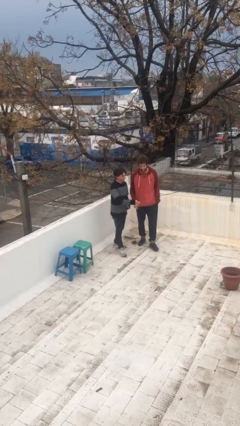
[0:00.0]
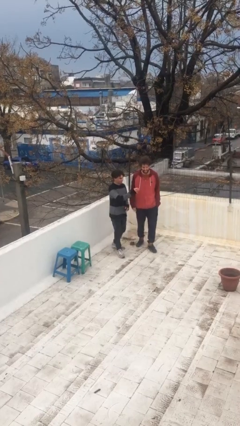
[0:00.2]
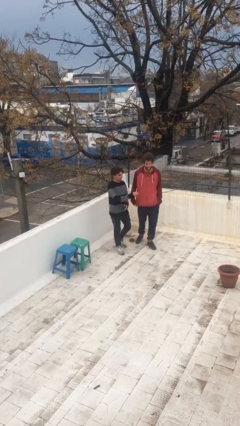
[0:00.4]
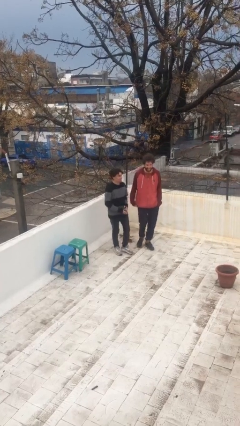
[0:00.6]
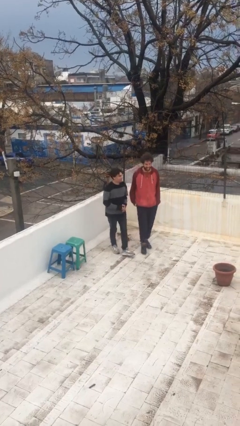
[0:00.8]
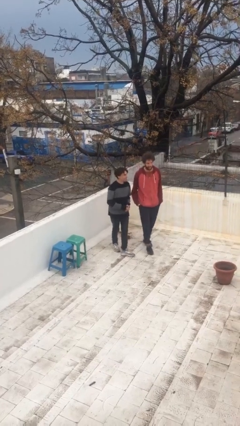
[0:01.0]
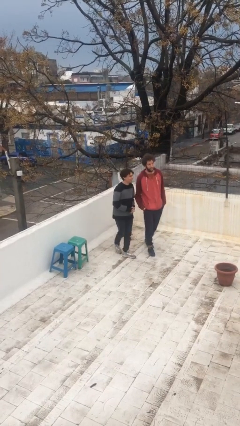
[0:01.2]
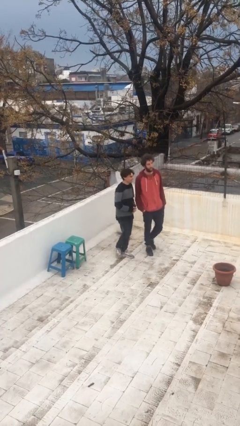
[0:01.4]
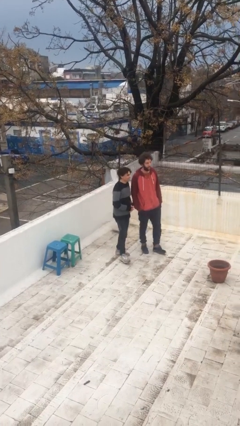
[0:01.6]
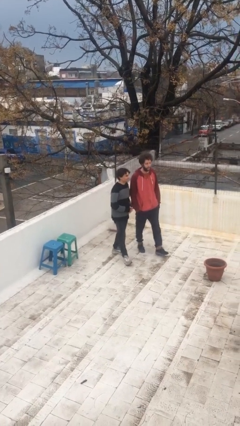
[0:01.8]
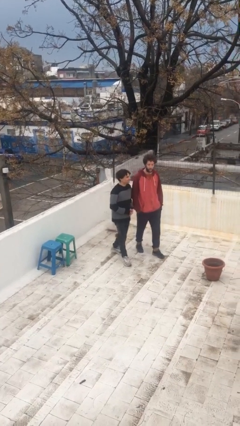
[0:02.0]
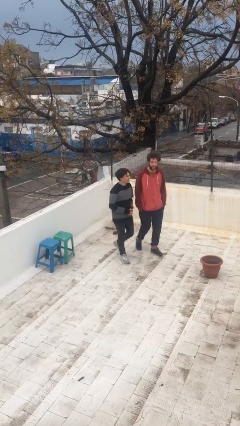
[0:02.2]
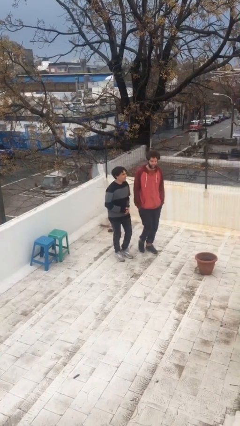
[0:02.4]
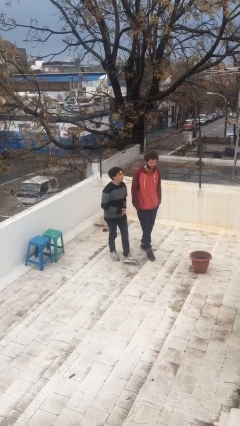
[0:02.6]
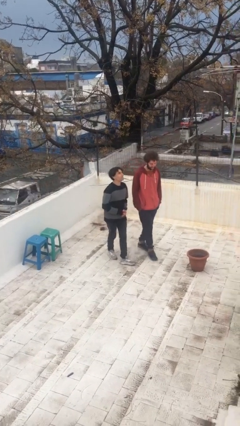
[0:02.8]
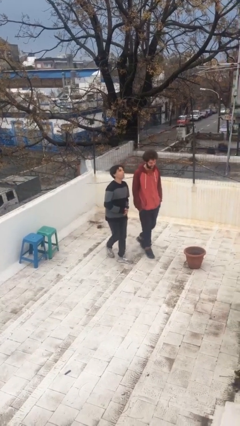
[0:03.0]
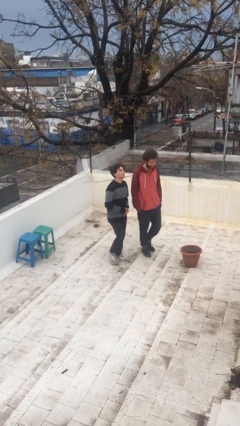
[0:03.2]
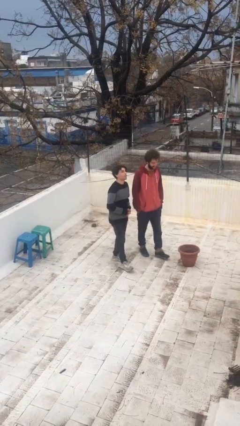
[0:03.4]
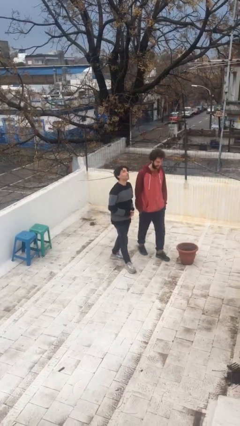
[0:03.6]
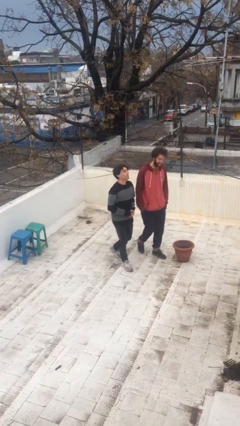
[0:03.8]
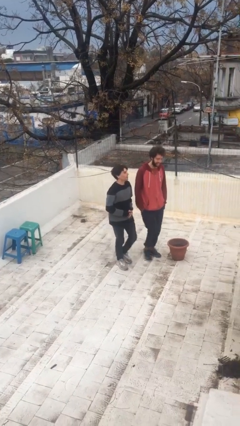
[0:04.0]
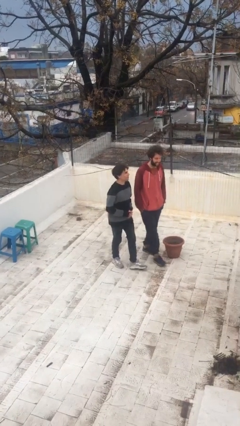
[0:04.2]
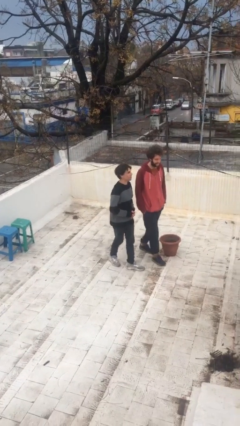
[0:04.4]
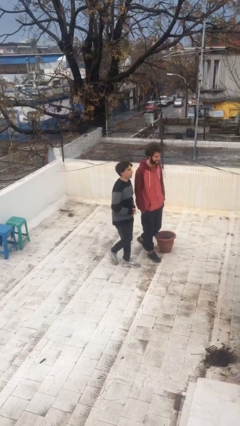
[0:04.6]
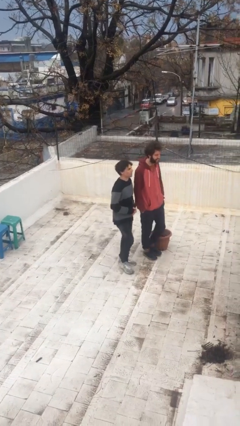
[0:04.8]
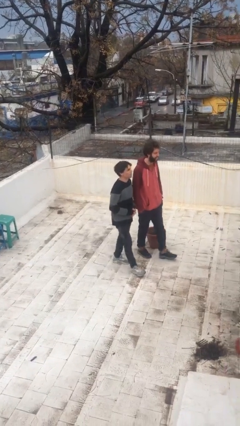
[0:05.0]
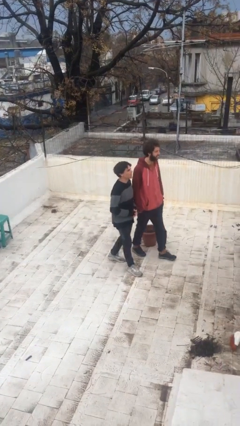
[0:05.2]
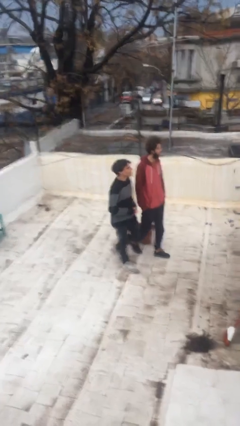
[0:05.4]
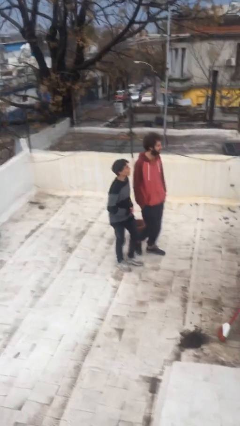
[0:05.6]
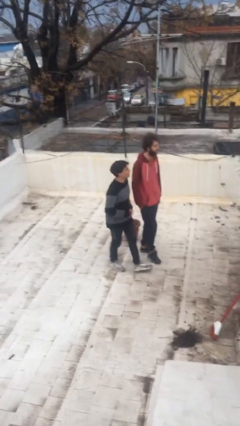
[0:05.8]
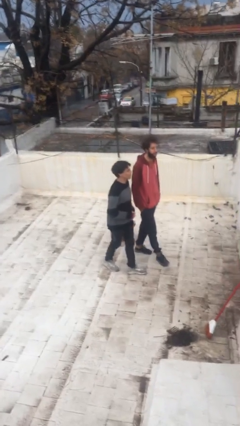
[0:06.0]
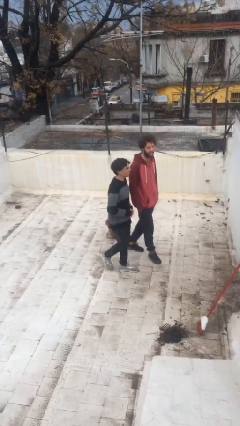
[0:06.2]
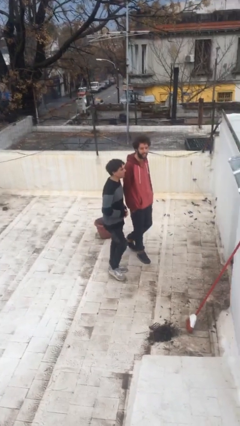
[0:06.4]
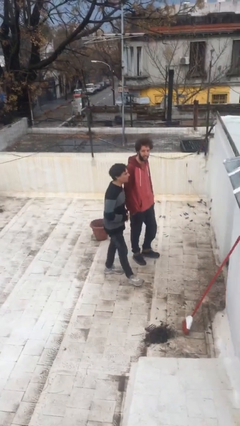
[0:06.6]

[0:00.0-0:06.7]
person talks to person

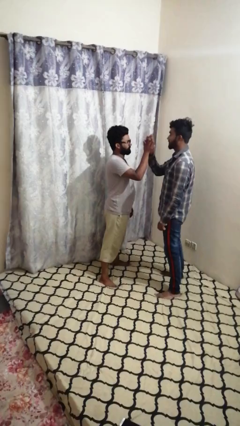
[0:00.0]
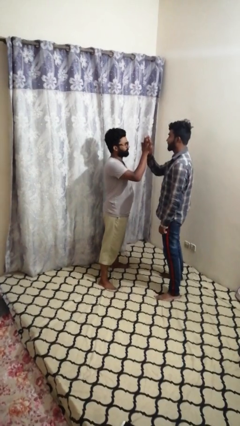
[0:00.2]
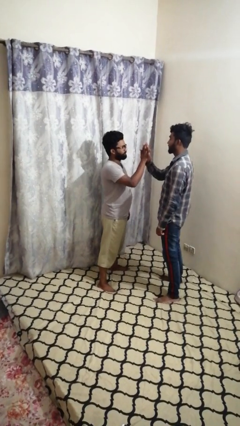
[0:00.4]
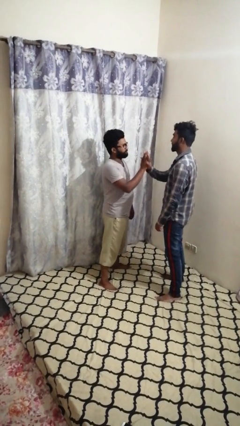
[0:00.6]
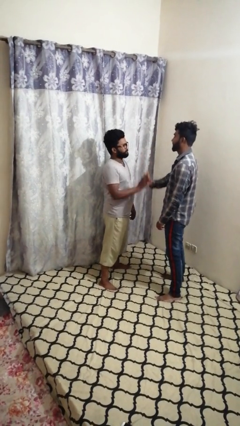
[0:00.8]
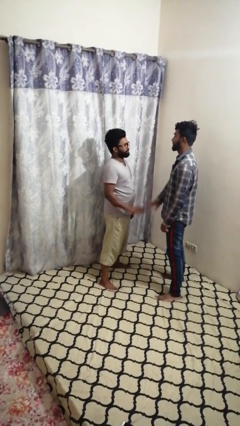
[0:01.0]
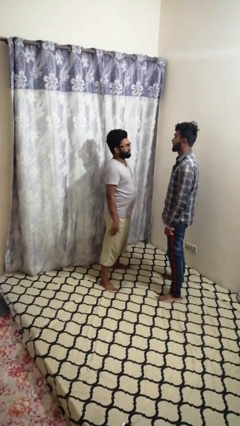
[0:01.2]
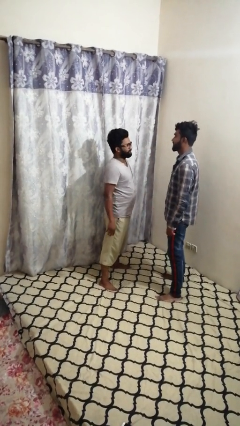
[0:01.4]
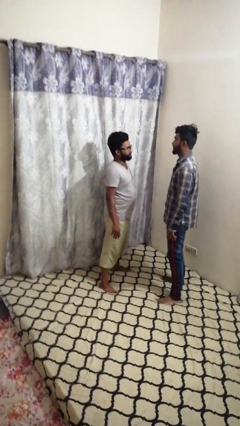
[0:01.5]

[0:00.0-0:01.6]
person highfives hand

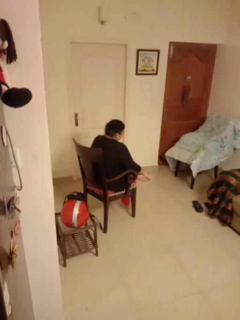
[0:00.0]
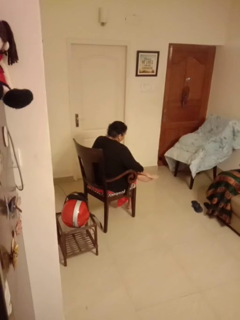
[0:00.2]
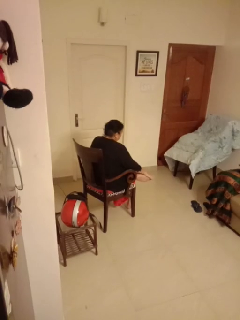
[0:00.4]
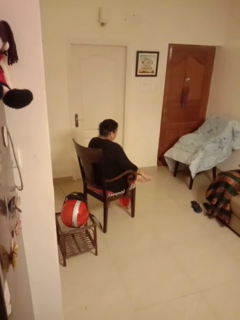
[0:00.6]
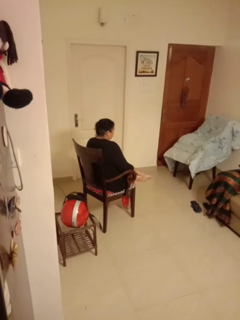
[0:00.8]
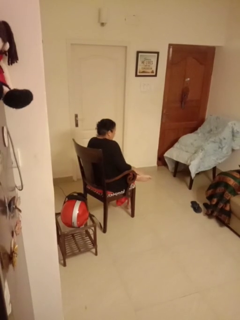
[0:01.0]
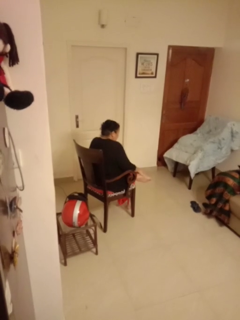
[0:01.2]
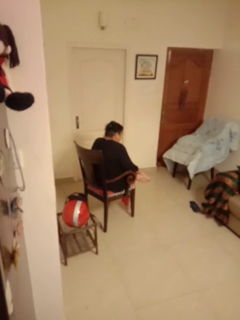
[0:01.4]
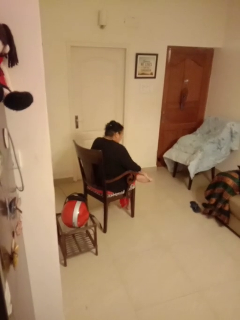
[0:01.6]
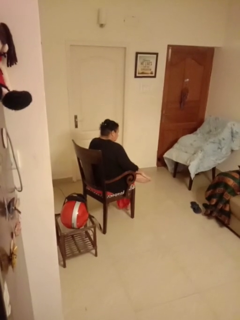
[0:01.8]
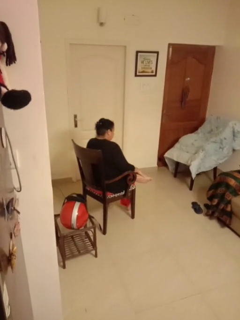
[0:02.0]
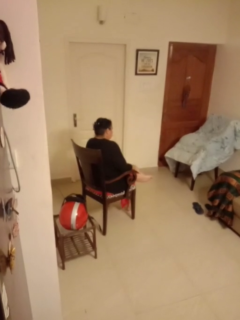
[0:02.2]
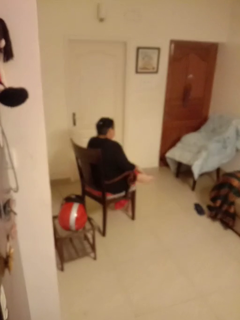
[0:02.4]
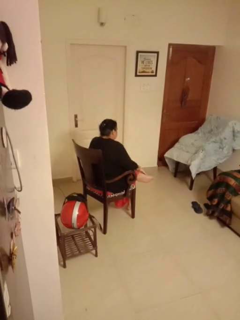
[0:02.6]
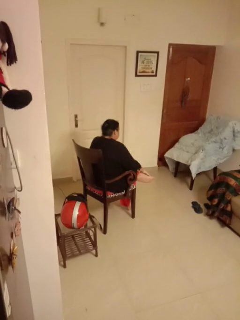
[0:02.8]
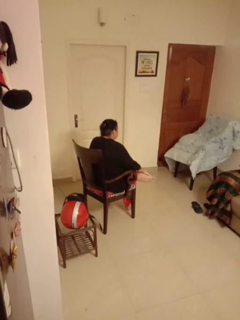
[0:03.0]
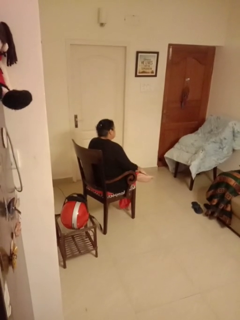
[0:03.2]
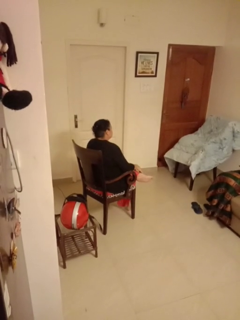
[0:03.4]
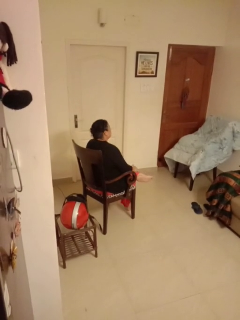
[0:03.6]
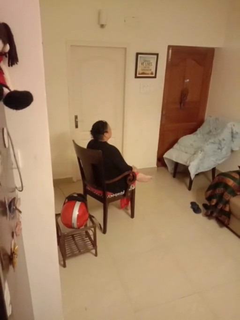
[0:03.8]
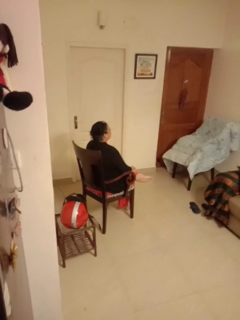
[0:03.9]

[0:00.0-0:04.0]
person rubs foot

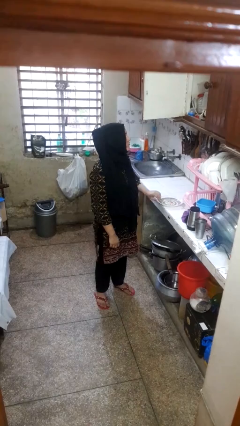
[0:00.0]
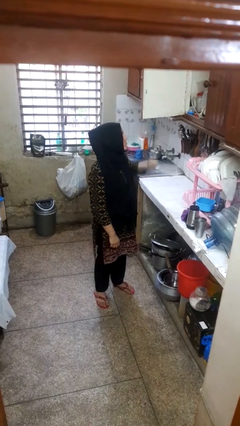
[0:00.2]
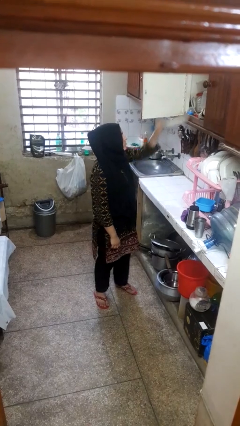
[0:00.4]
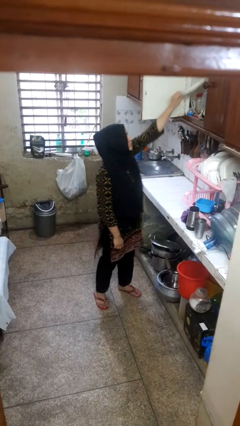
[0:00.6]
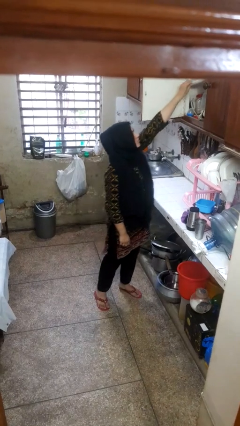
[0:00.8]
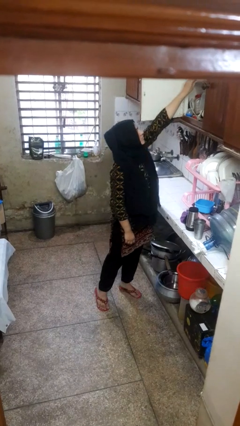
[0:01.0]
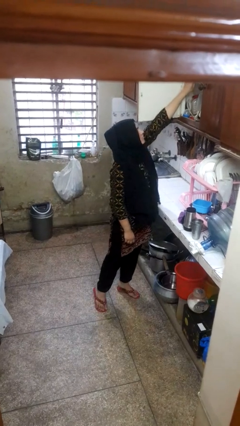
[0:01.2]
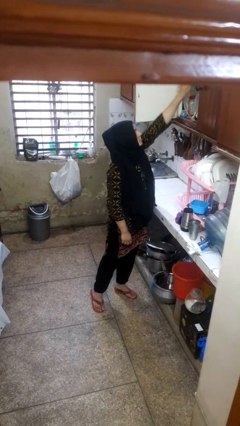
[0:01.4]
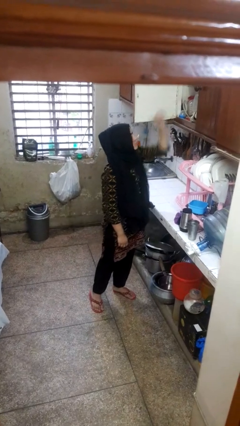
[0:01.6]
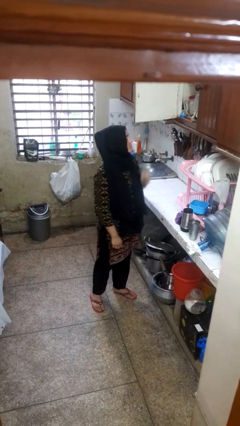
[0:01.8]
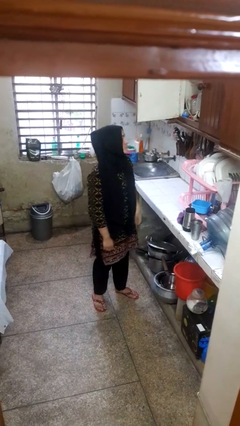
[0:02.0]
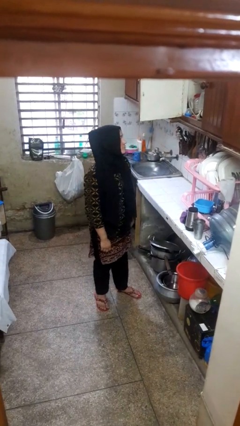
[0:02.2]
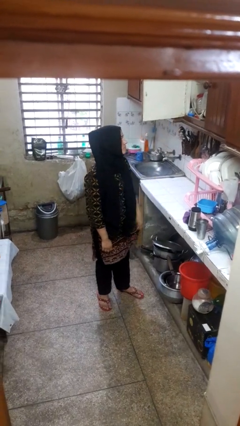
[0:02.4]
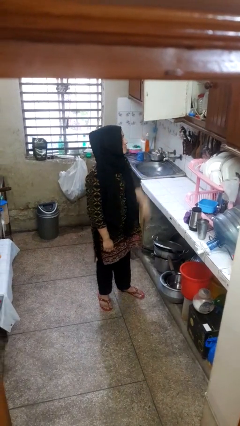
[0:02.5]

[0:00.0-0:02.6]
person puts object in cabinet

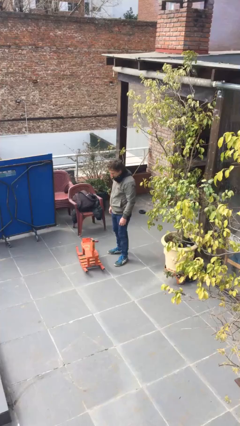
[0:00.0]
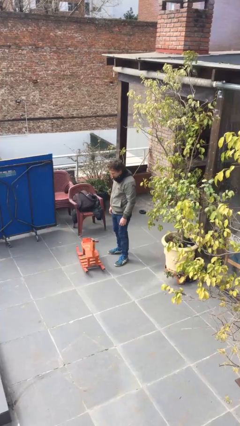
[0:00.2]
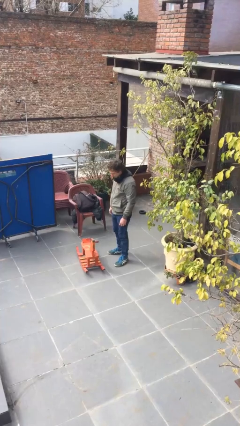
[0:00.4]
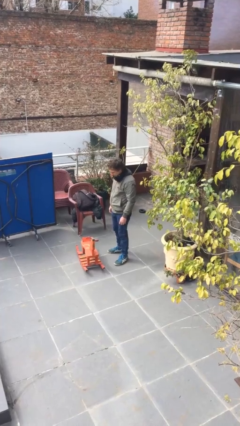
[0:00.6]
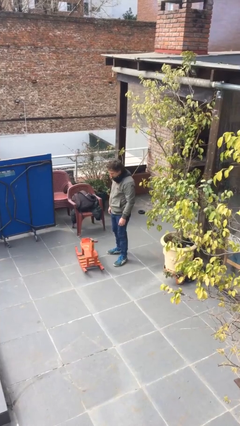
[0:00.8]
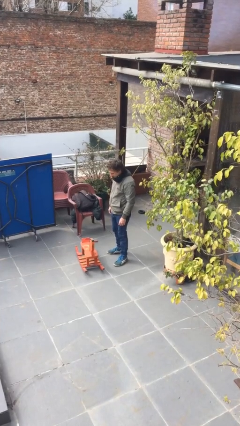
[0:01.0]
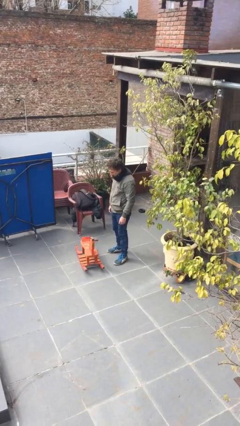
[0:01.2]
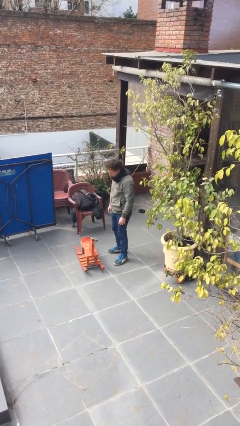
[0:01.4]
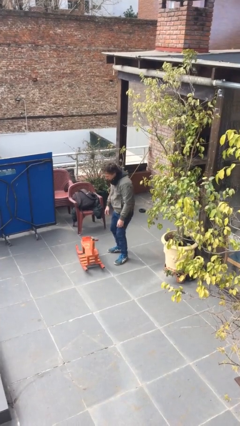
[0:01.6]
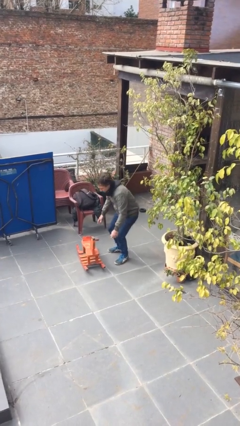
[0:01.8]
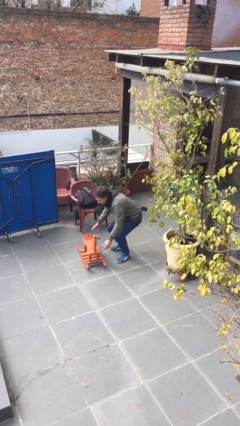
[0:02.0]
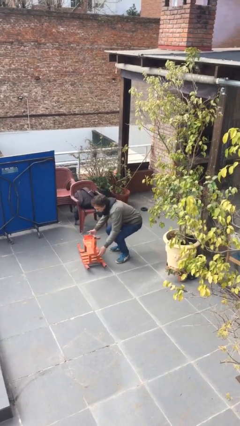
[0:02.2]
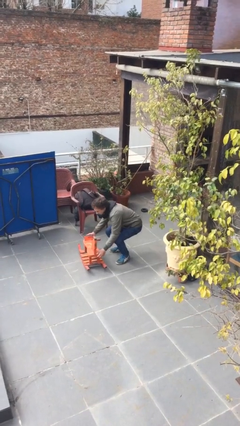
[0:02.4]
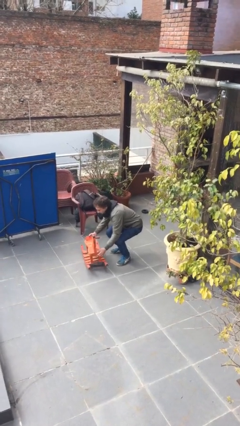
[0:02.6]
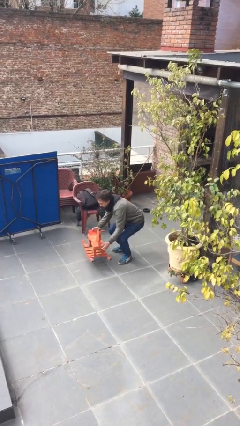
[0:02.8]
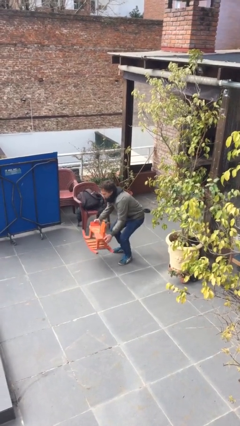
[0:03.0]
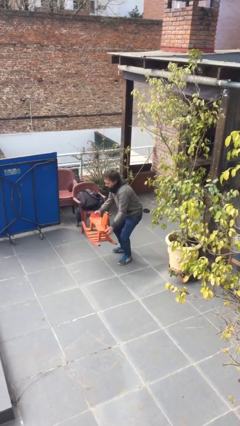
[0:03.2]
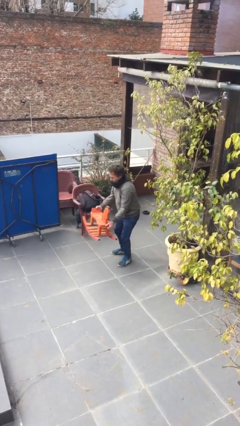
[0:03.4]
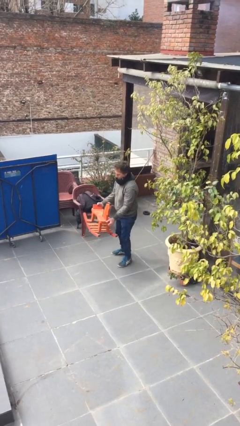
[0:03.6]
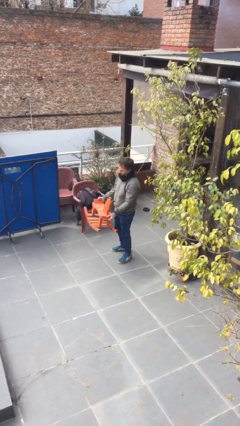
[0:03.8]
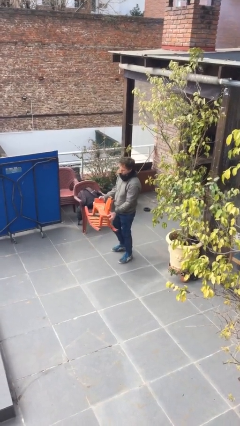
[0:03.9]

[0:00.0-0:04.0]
person picks up object from floor
